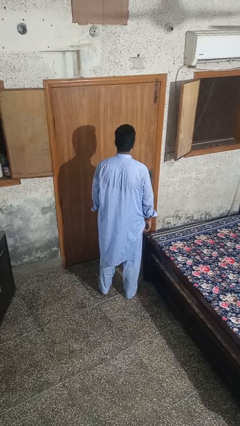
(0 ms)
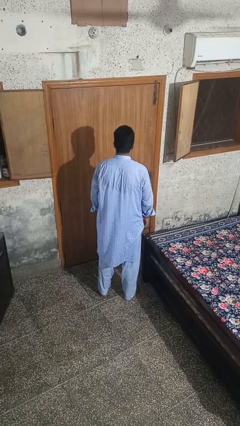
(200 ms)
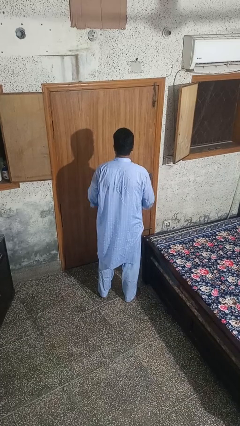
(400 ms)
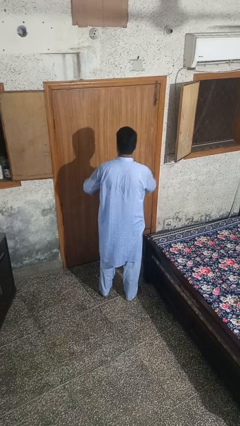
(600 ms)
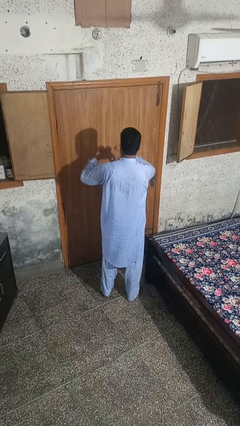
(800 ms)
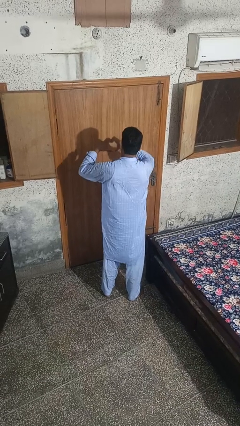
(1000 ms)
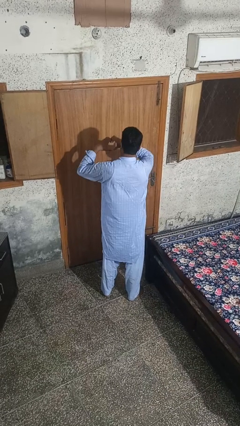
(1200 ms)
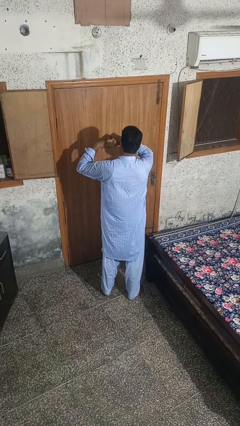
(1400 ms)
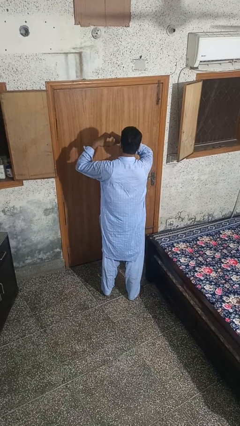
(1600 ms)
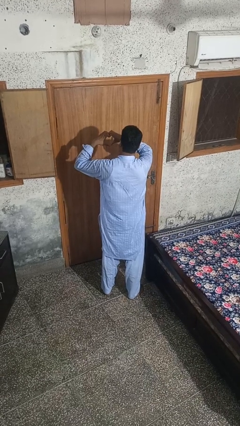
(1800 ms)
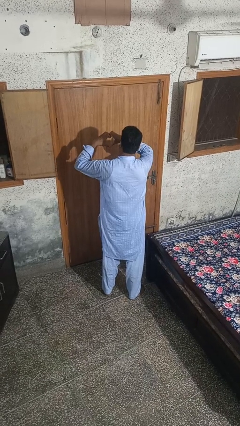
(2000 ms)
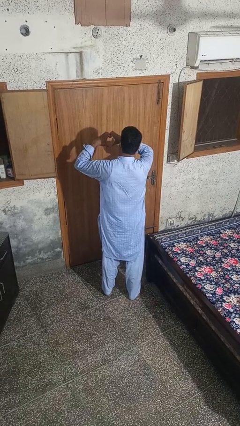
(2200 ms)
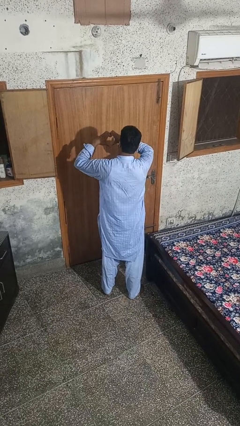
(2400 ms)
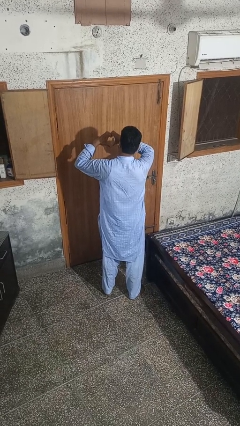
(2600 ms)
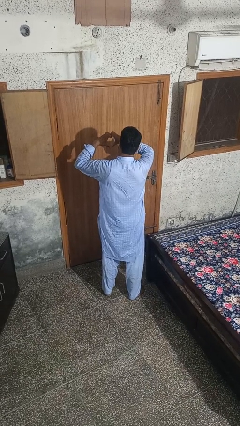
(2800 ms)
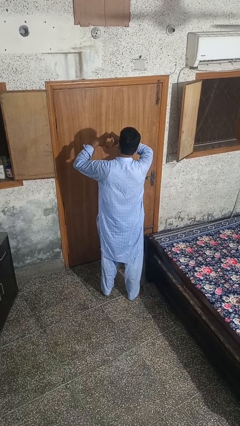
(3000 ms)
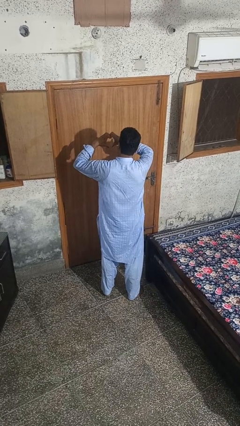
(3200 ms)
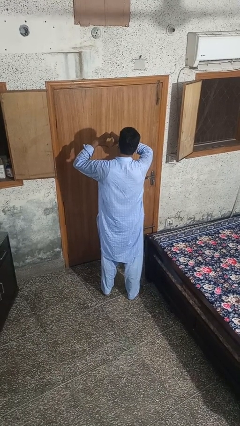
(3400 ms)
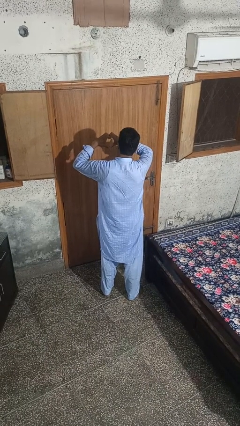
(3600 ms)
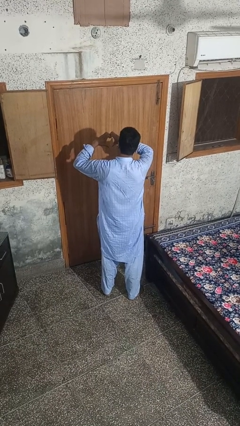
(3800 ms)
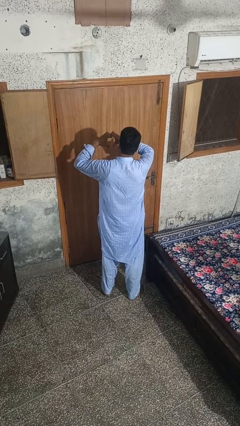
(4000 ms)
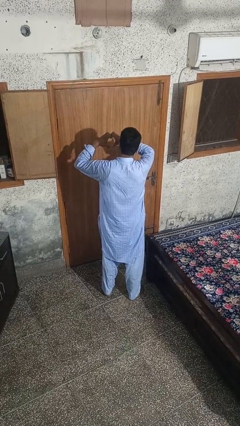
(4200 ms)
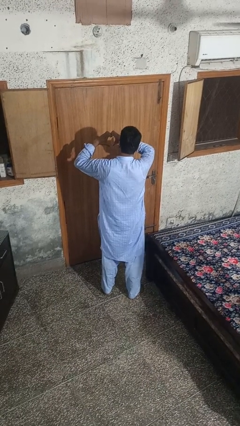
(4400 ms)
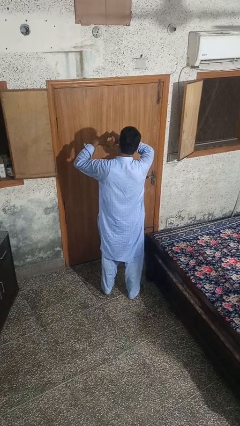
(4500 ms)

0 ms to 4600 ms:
person gestures heart

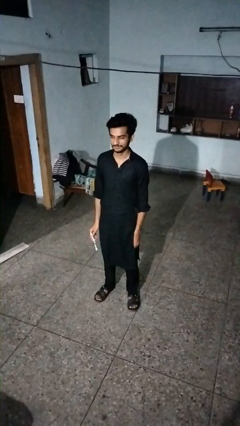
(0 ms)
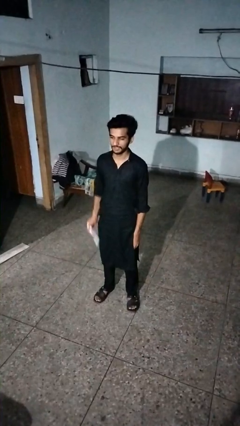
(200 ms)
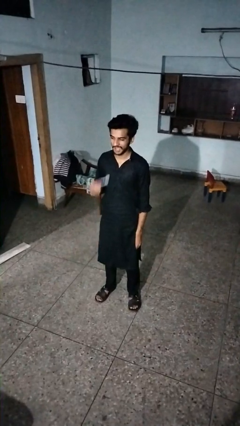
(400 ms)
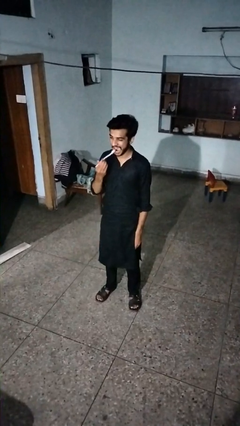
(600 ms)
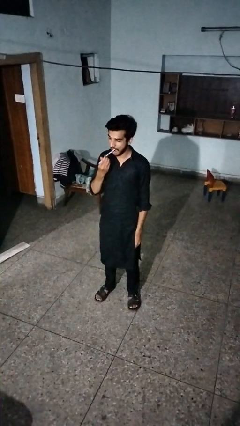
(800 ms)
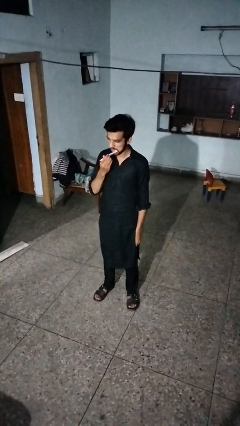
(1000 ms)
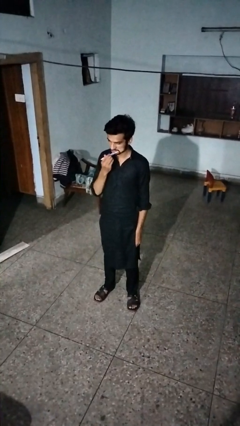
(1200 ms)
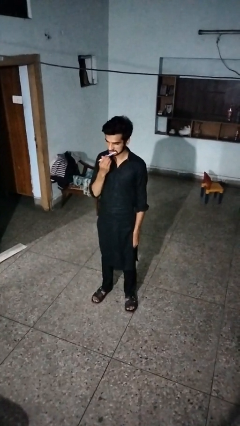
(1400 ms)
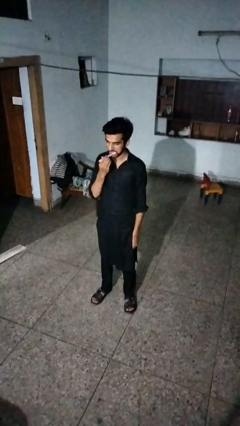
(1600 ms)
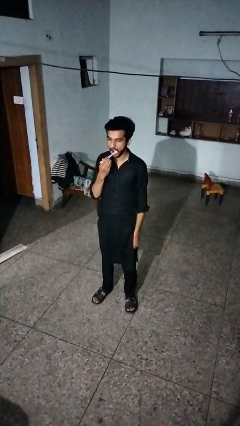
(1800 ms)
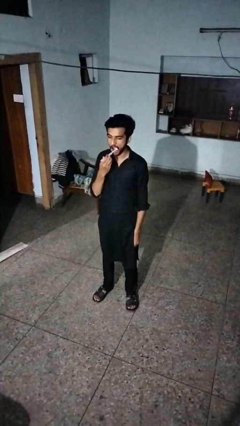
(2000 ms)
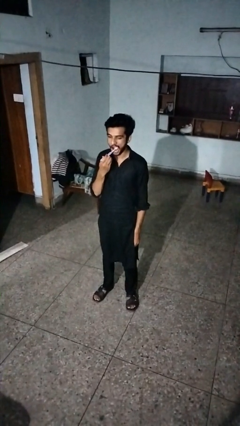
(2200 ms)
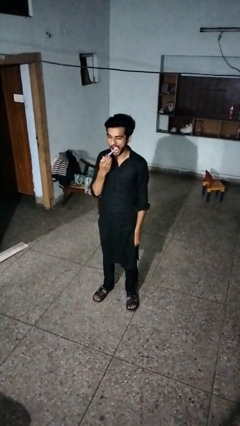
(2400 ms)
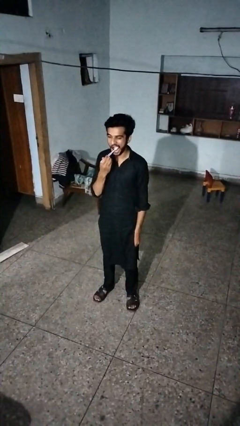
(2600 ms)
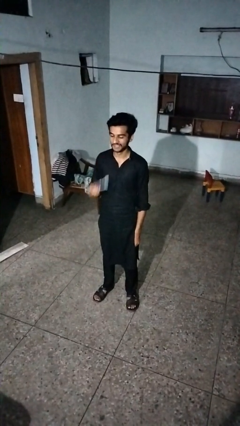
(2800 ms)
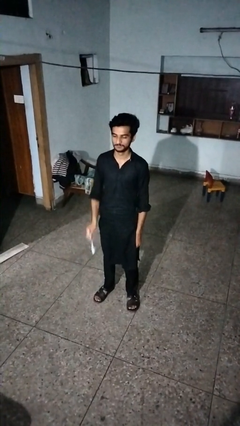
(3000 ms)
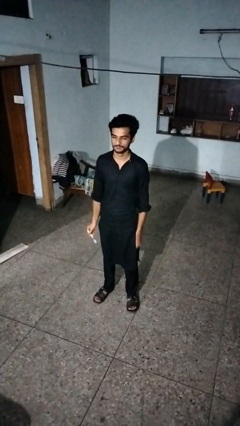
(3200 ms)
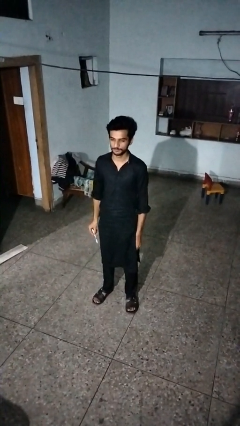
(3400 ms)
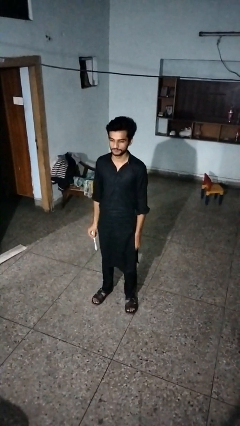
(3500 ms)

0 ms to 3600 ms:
person brushes teeth

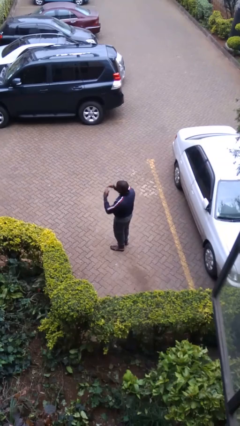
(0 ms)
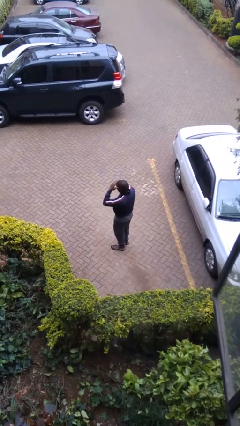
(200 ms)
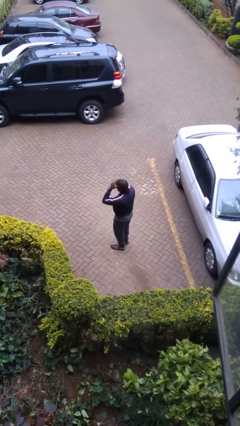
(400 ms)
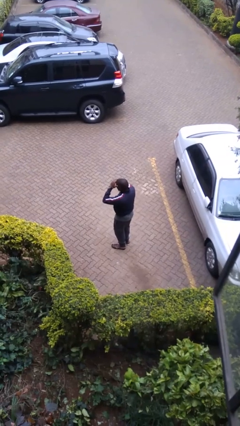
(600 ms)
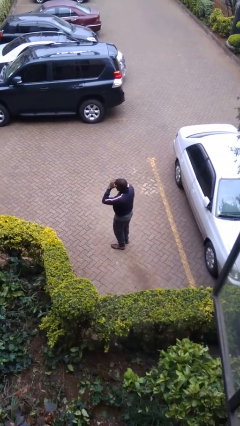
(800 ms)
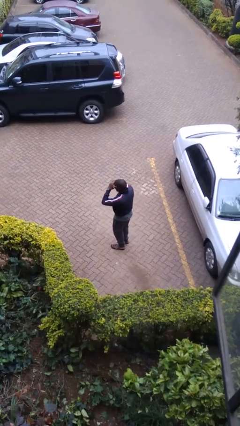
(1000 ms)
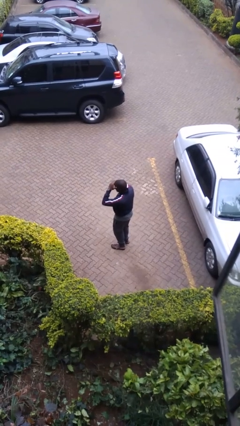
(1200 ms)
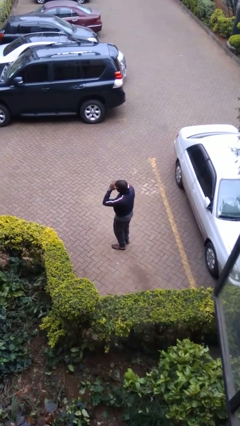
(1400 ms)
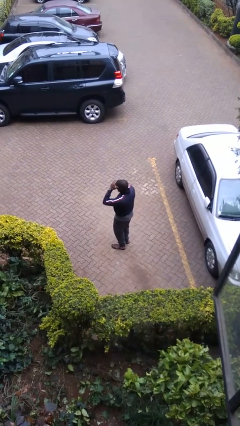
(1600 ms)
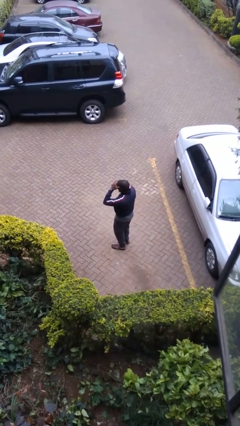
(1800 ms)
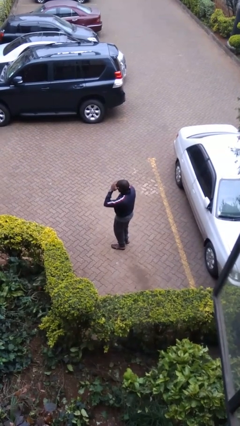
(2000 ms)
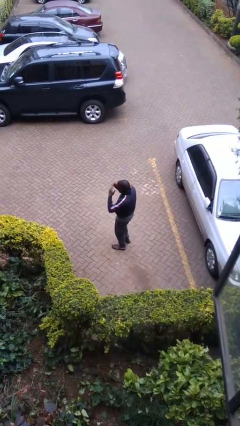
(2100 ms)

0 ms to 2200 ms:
person shades eyes

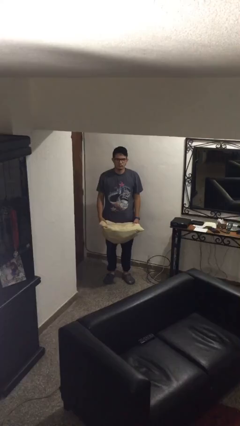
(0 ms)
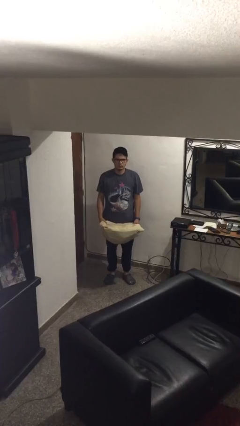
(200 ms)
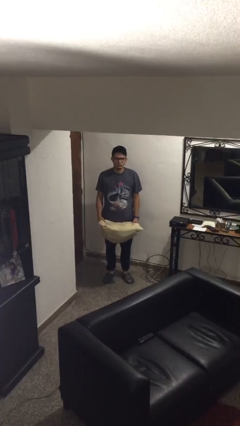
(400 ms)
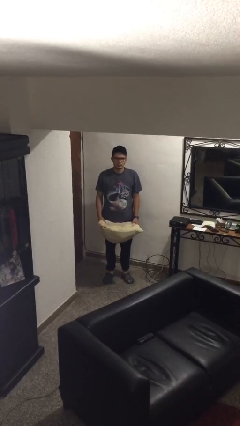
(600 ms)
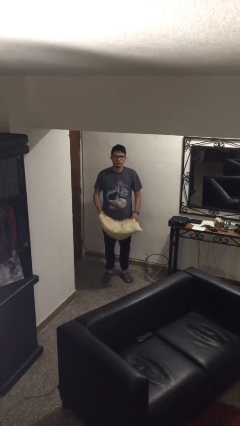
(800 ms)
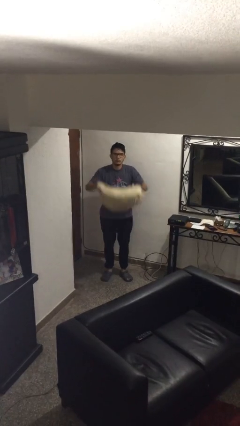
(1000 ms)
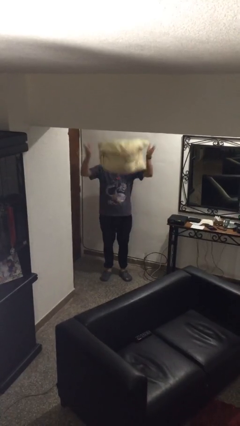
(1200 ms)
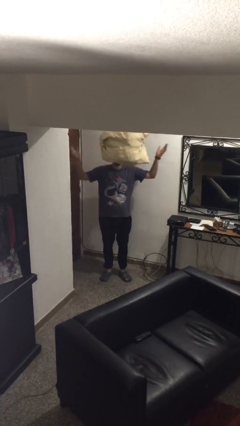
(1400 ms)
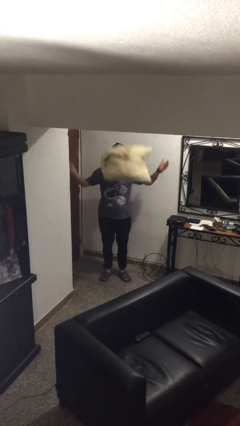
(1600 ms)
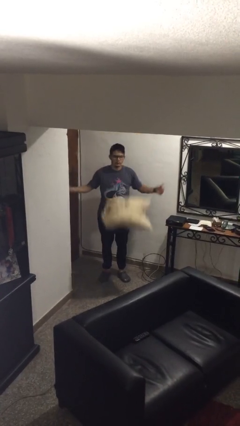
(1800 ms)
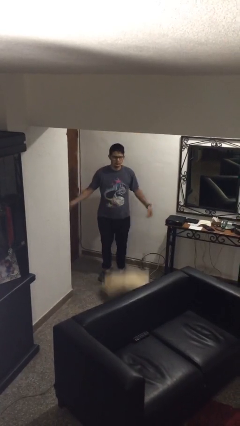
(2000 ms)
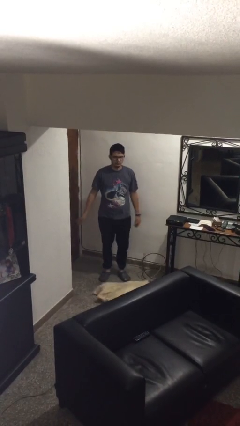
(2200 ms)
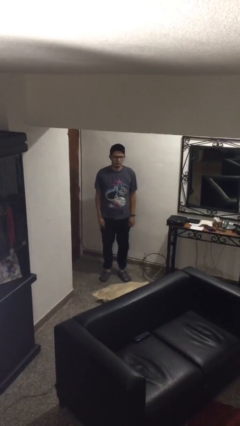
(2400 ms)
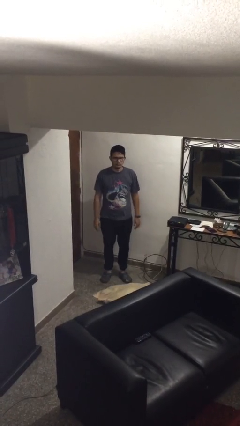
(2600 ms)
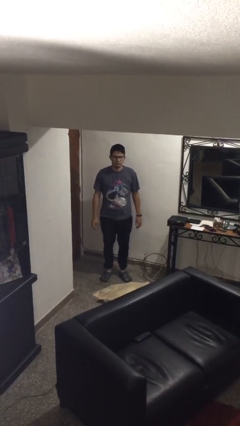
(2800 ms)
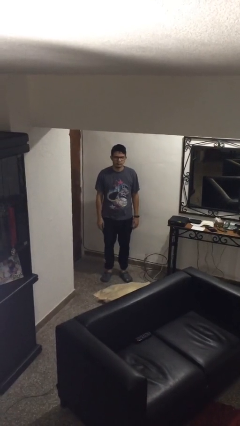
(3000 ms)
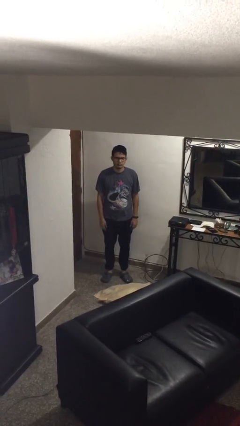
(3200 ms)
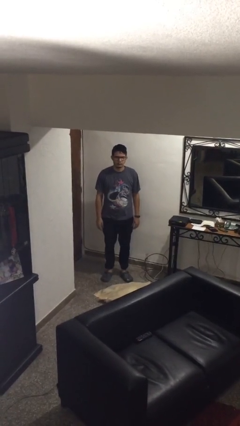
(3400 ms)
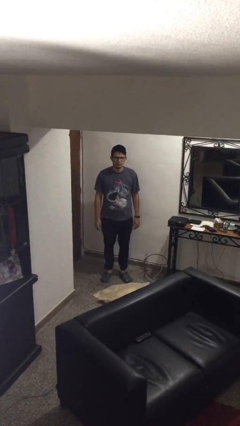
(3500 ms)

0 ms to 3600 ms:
person throws object into air

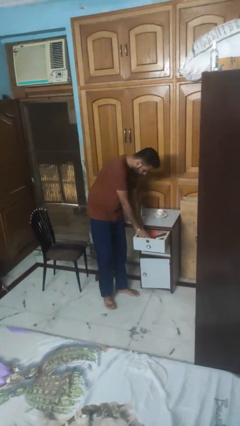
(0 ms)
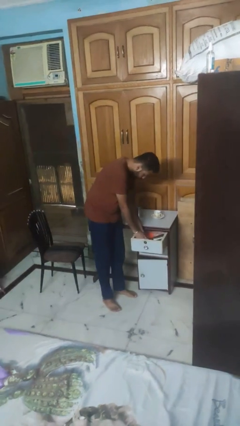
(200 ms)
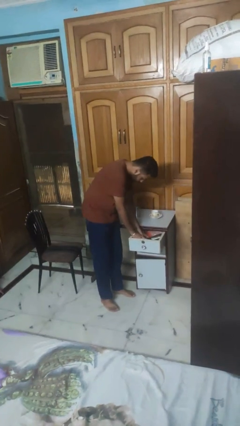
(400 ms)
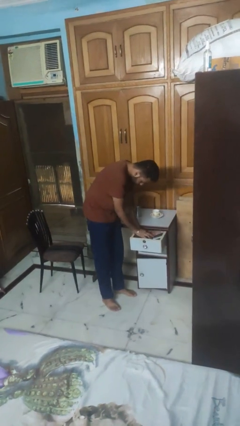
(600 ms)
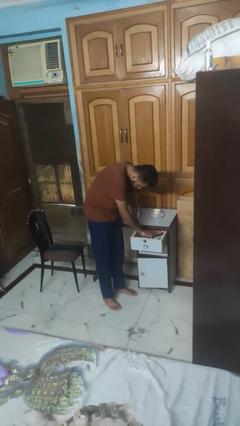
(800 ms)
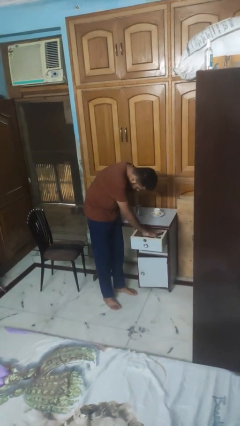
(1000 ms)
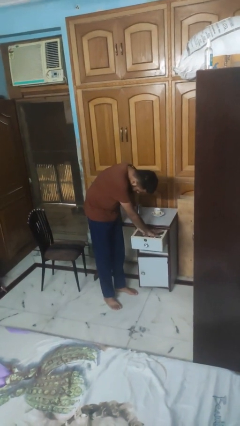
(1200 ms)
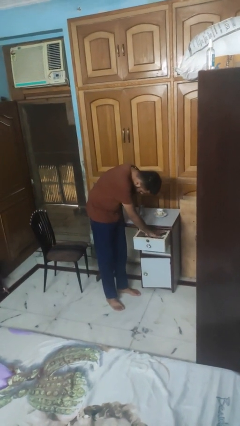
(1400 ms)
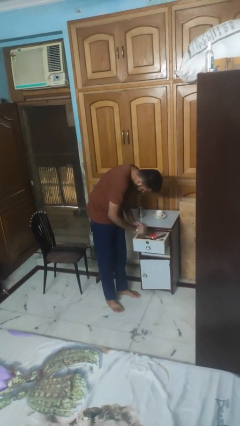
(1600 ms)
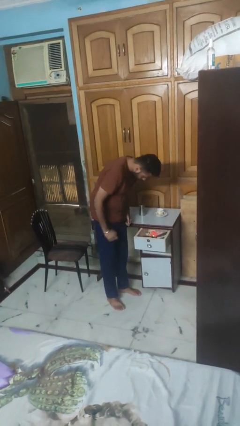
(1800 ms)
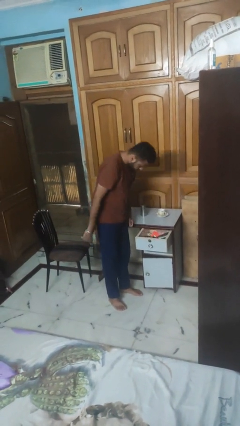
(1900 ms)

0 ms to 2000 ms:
person searches in kitchen drawer

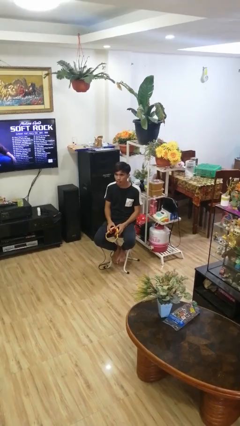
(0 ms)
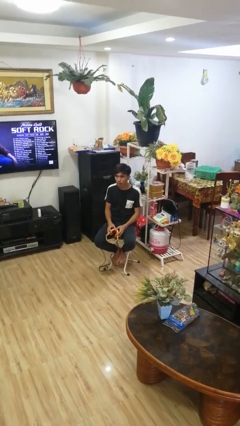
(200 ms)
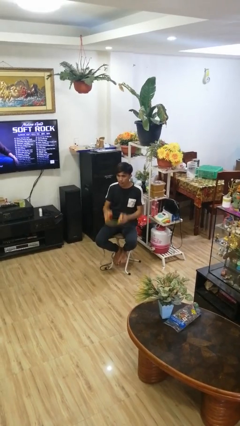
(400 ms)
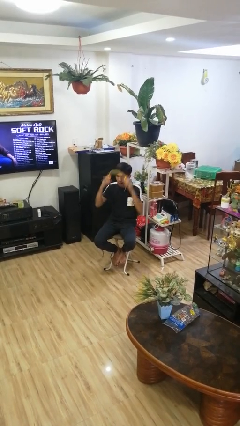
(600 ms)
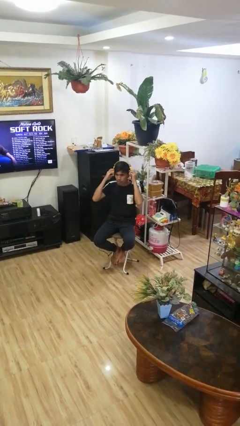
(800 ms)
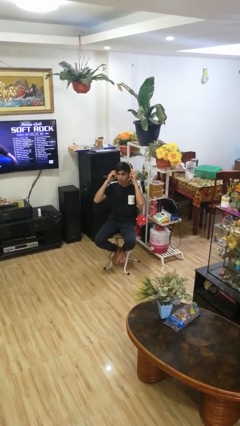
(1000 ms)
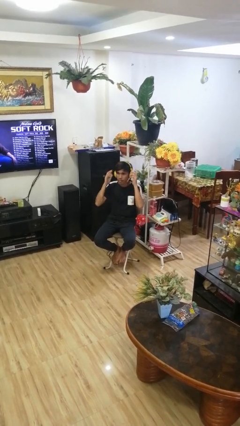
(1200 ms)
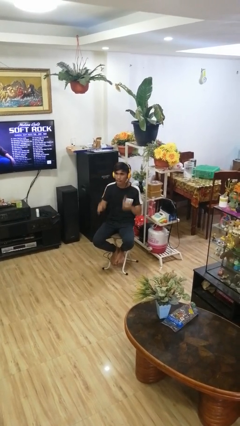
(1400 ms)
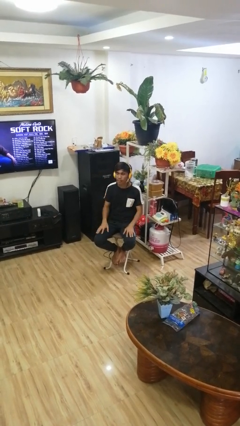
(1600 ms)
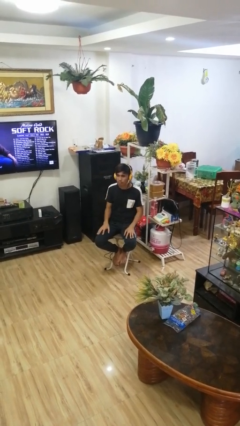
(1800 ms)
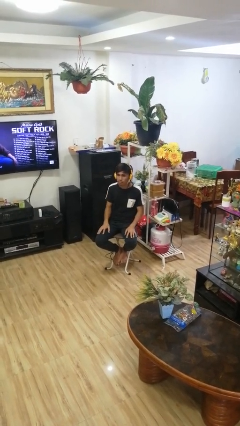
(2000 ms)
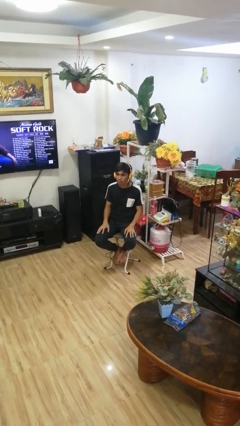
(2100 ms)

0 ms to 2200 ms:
person puts on headphones
